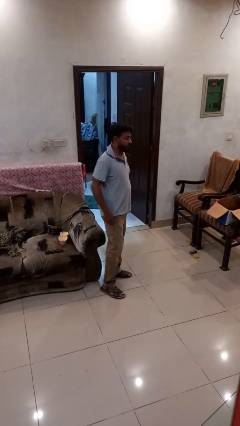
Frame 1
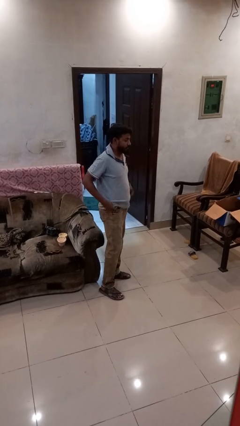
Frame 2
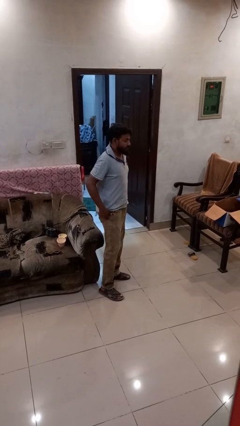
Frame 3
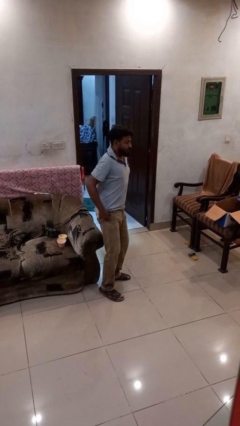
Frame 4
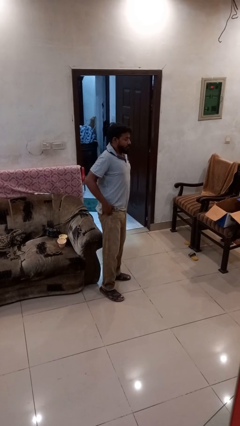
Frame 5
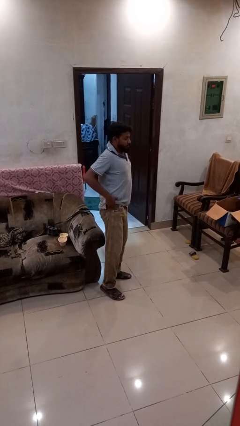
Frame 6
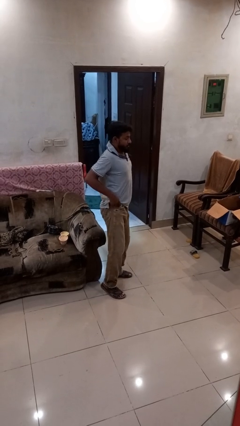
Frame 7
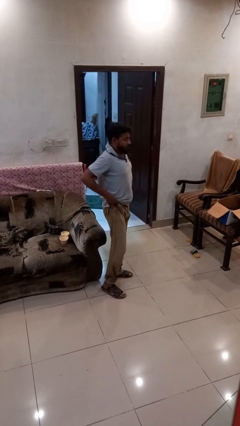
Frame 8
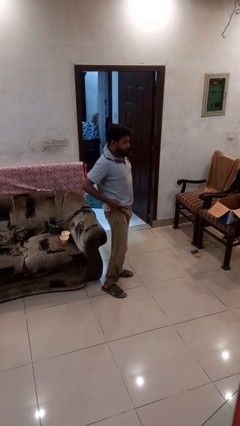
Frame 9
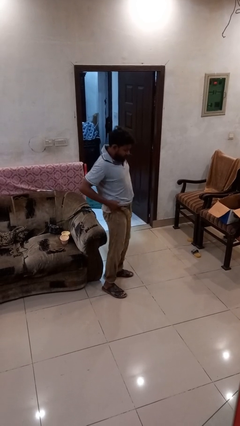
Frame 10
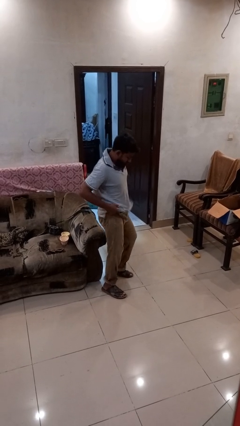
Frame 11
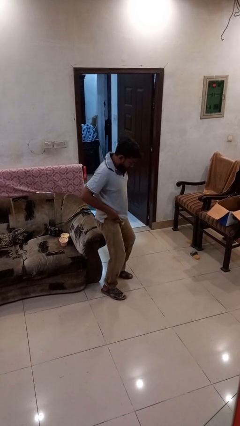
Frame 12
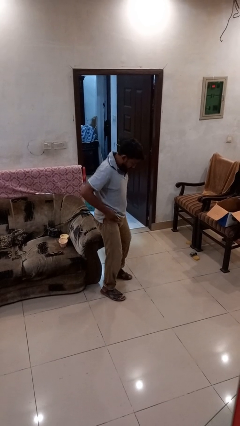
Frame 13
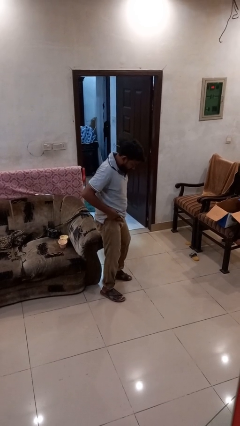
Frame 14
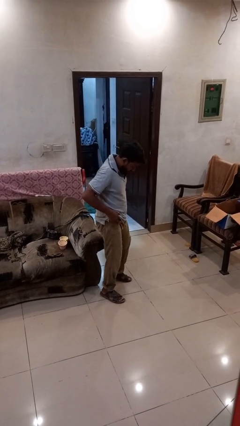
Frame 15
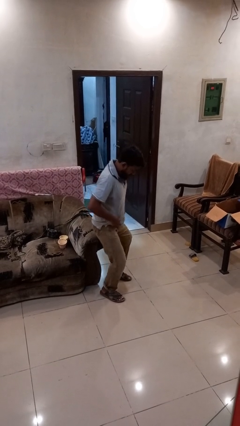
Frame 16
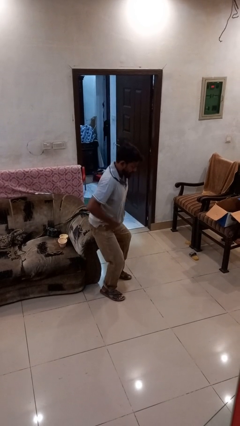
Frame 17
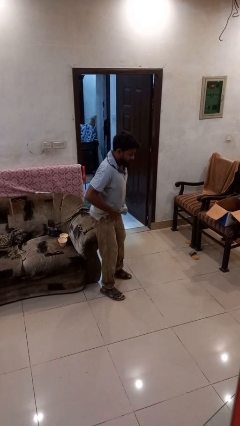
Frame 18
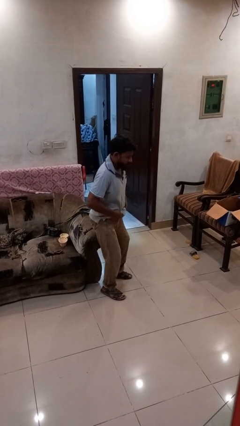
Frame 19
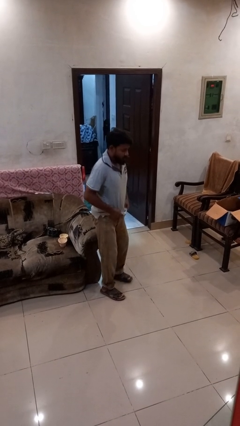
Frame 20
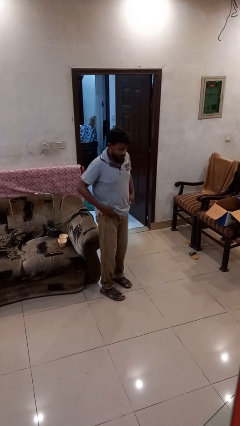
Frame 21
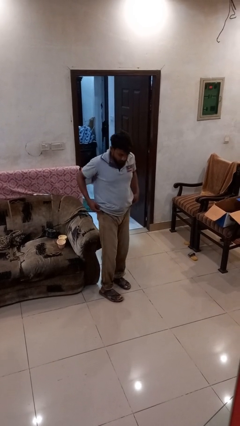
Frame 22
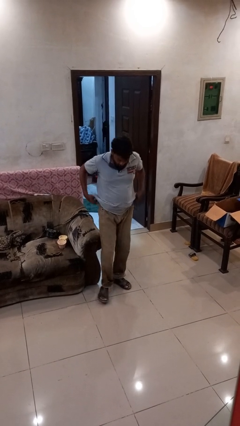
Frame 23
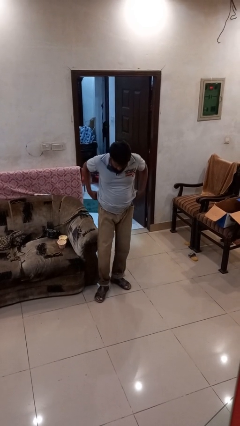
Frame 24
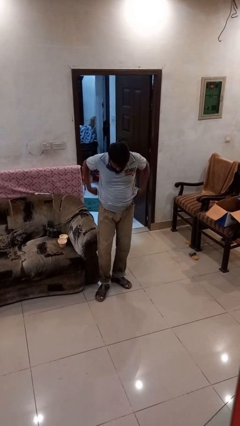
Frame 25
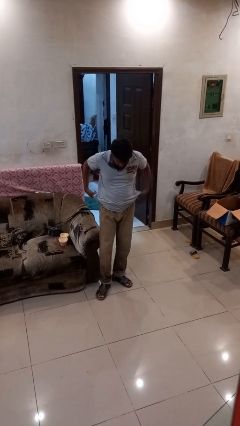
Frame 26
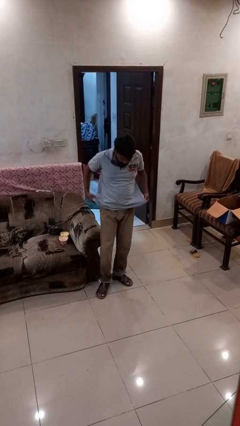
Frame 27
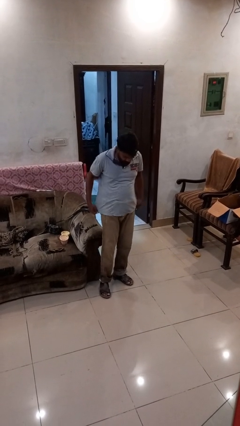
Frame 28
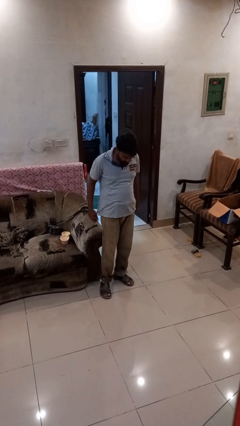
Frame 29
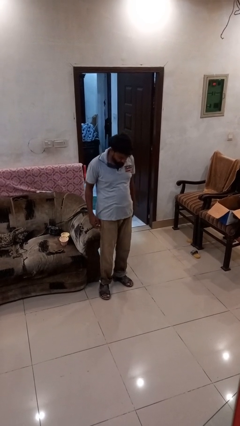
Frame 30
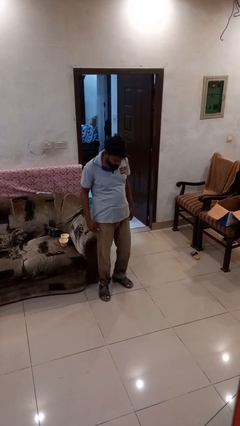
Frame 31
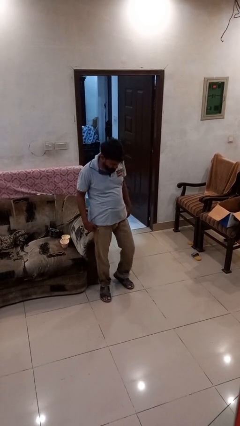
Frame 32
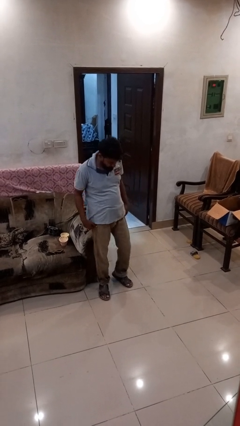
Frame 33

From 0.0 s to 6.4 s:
person hikes up pants

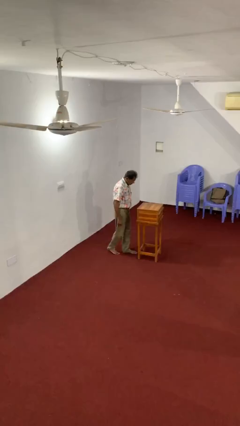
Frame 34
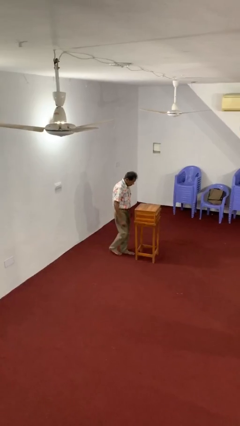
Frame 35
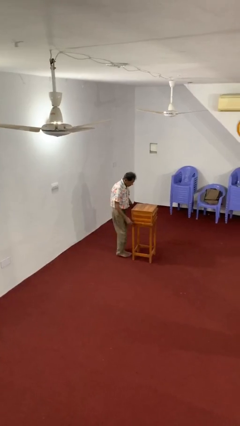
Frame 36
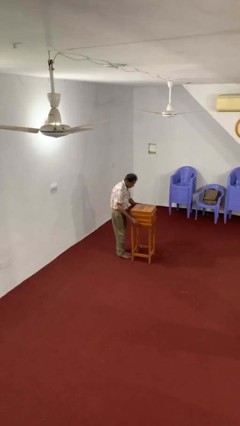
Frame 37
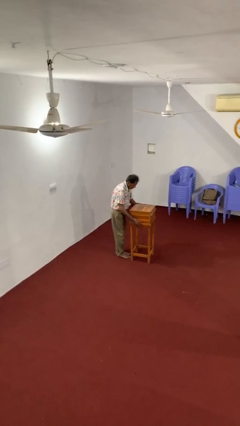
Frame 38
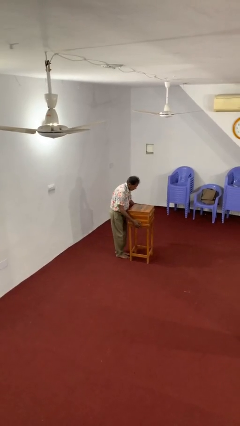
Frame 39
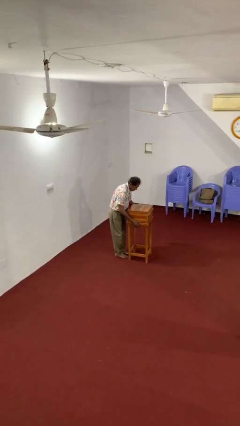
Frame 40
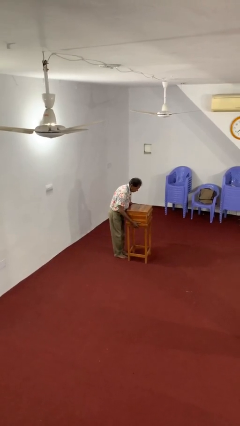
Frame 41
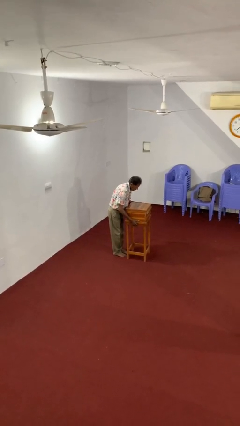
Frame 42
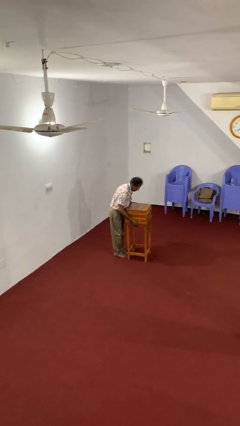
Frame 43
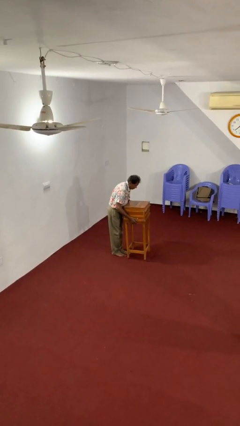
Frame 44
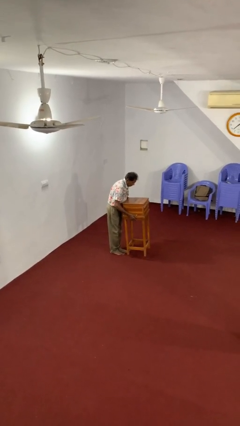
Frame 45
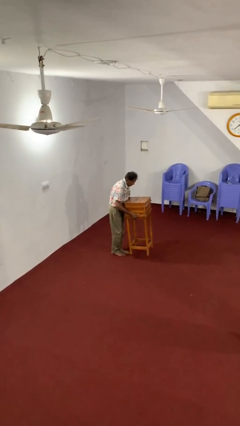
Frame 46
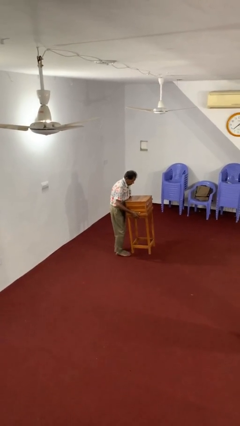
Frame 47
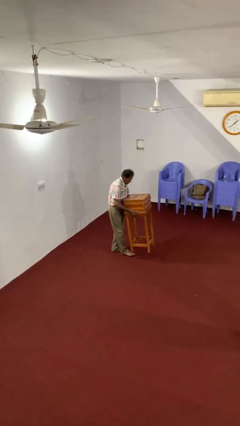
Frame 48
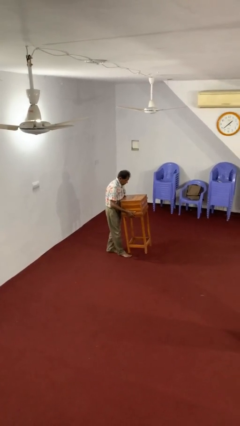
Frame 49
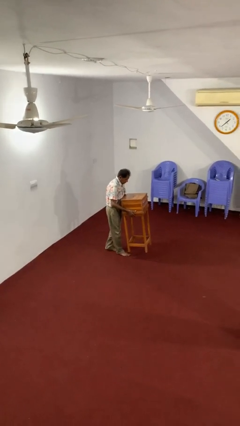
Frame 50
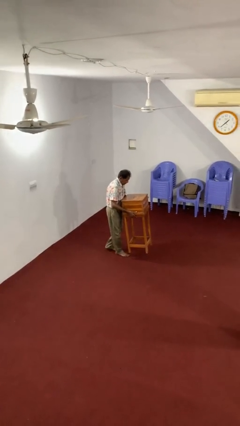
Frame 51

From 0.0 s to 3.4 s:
person picks up object from floor

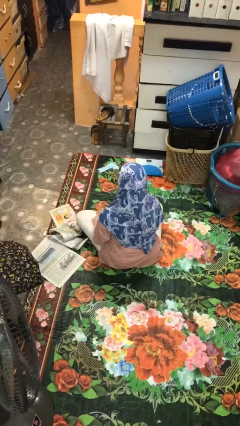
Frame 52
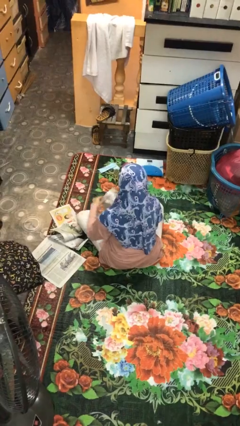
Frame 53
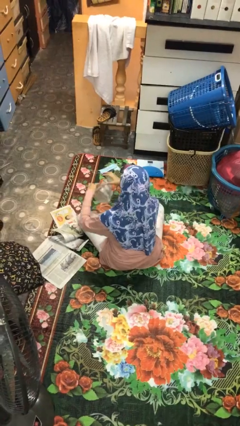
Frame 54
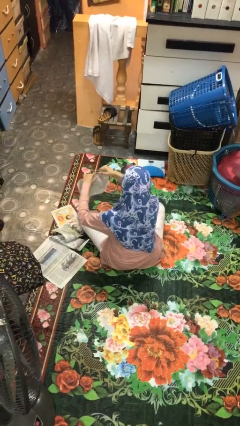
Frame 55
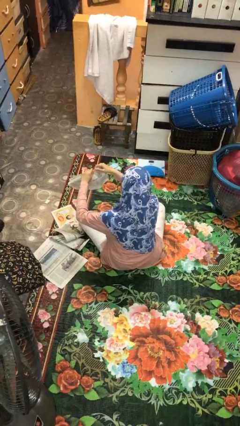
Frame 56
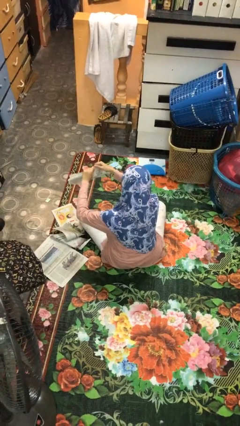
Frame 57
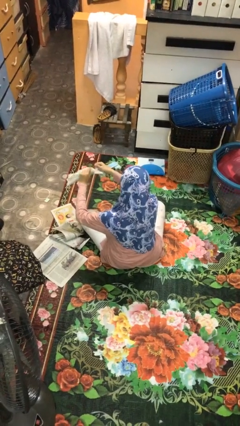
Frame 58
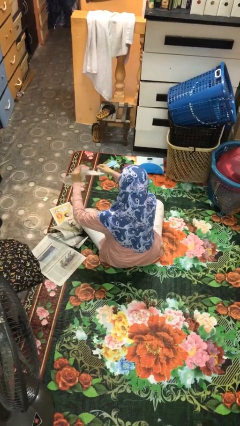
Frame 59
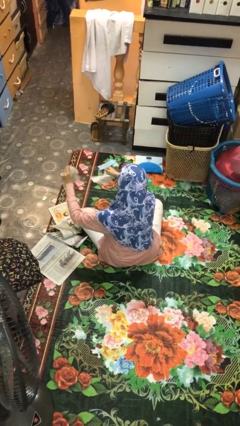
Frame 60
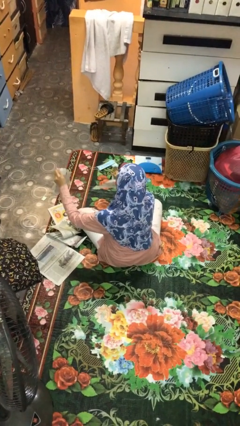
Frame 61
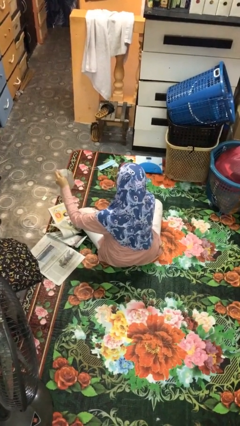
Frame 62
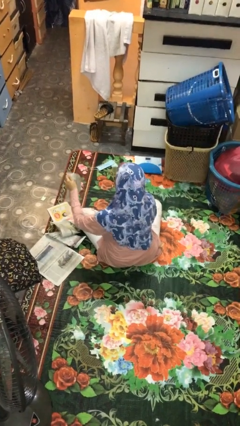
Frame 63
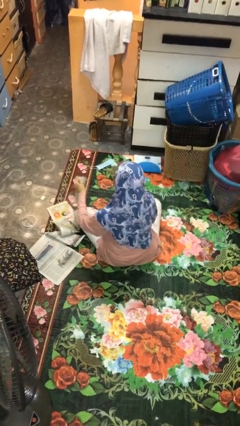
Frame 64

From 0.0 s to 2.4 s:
person tears paper

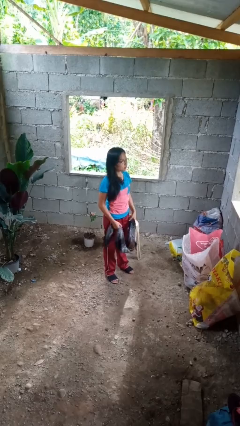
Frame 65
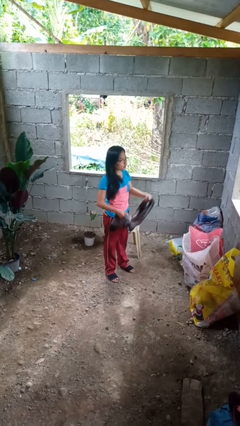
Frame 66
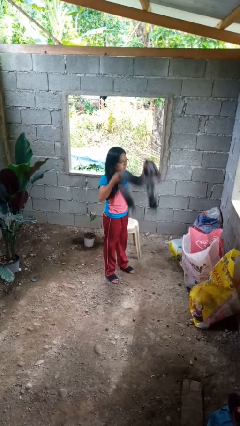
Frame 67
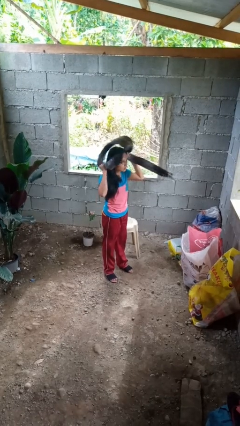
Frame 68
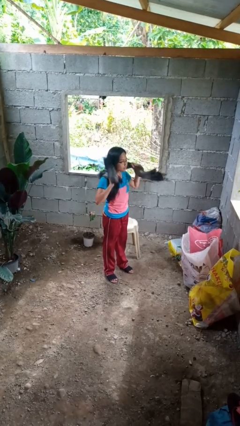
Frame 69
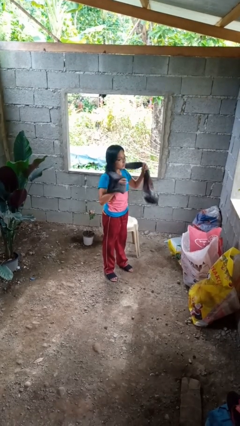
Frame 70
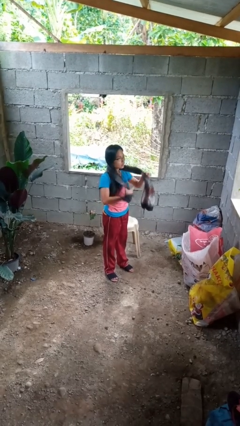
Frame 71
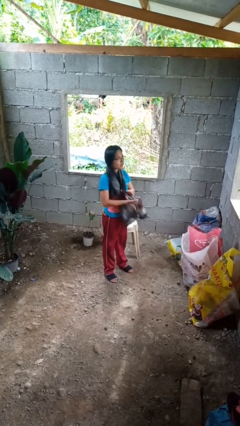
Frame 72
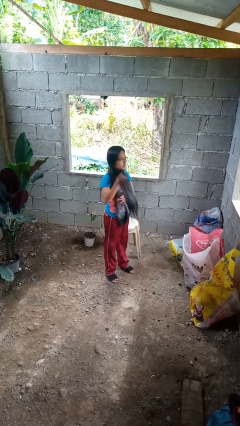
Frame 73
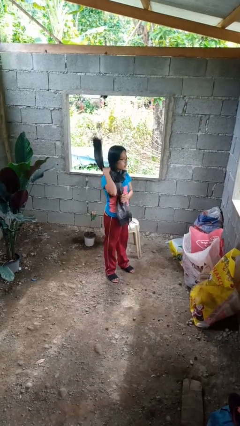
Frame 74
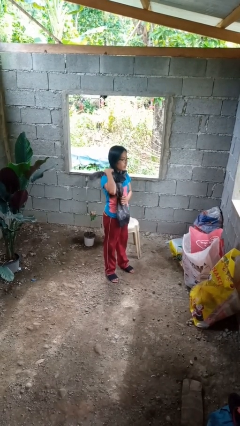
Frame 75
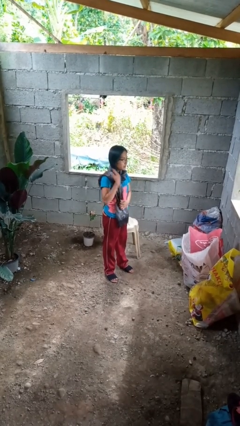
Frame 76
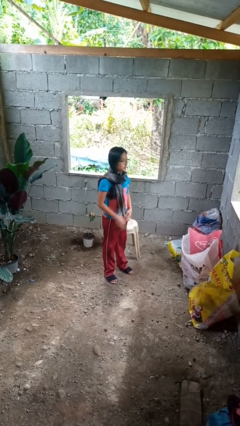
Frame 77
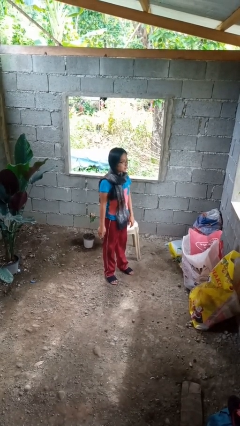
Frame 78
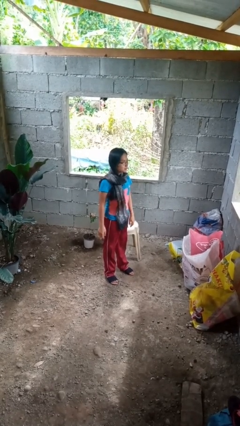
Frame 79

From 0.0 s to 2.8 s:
person puts on scarf

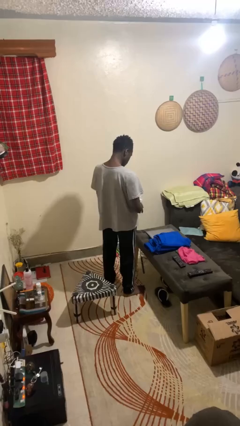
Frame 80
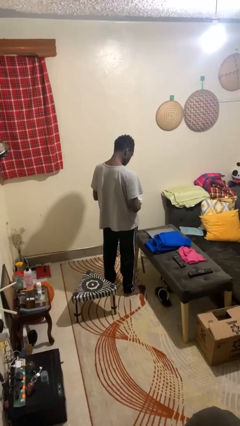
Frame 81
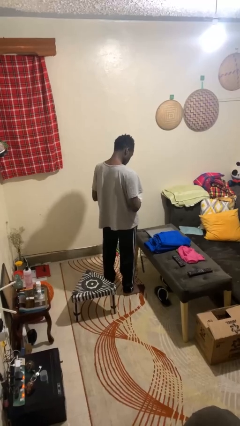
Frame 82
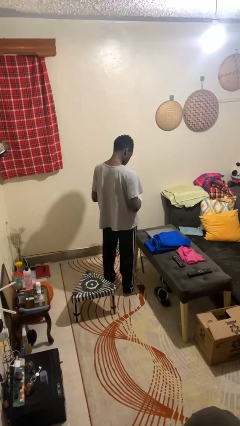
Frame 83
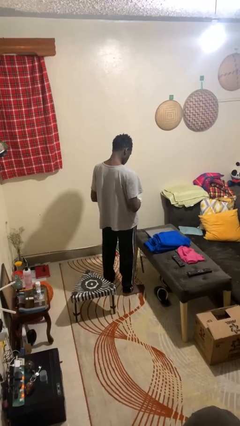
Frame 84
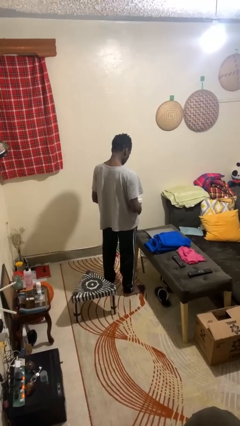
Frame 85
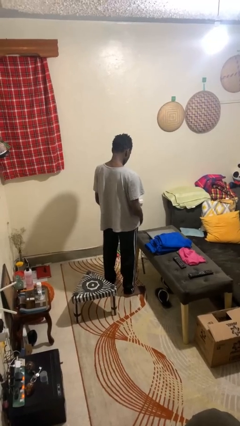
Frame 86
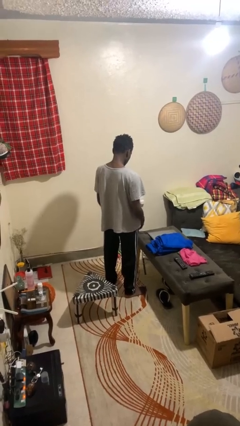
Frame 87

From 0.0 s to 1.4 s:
person swats bug

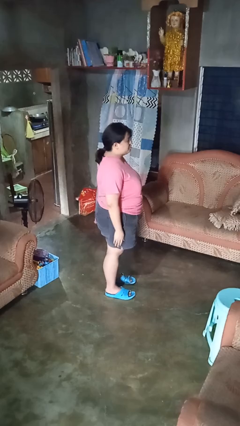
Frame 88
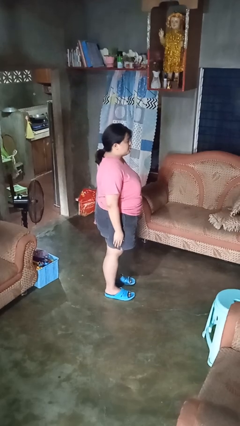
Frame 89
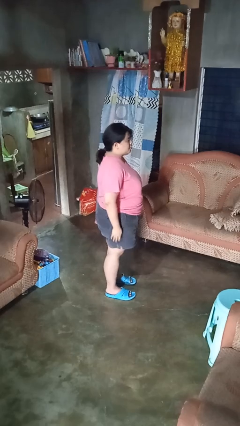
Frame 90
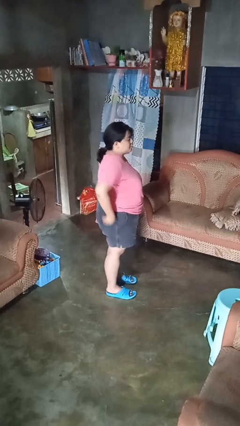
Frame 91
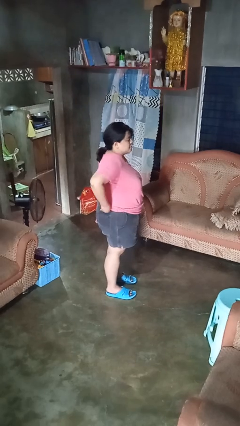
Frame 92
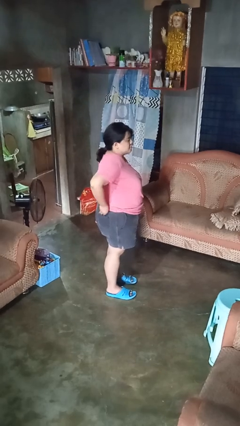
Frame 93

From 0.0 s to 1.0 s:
person puts hands in back pockets
